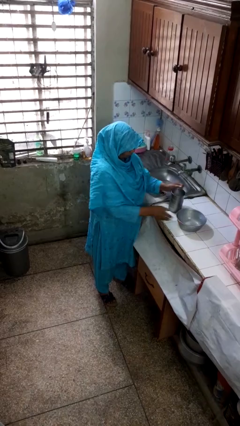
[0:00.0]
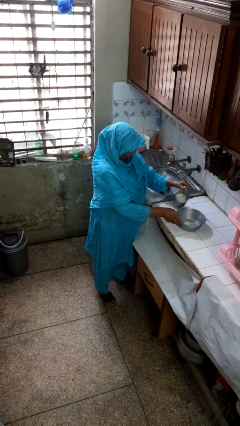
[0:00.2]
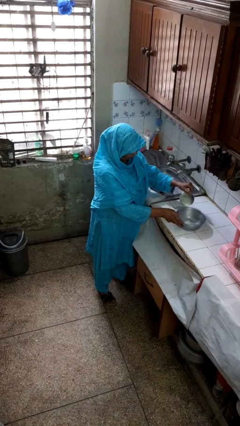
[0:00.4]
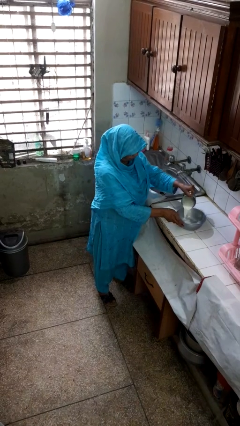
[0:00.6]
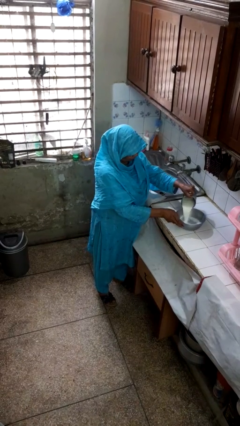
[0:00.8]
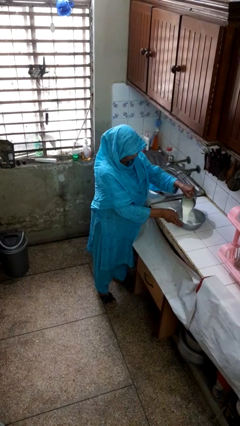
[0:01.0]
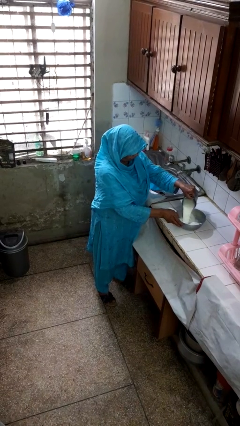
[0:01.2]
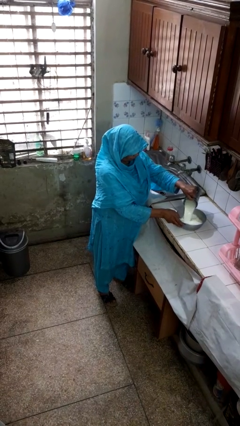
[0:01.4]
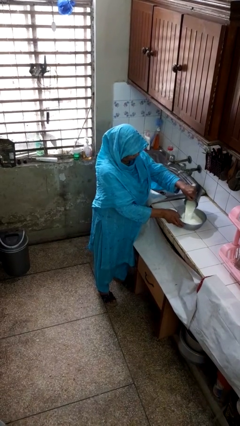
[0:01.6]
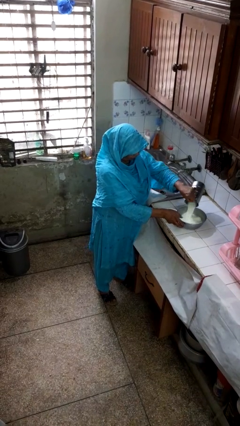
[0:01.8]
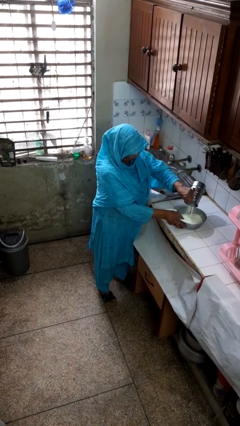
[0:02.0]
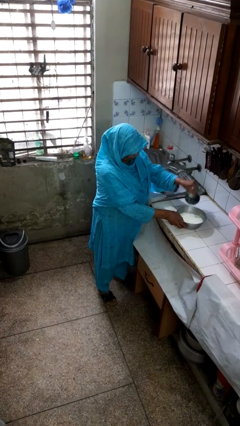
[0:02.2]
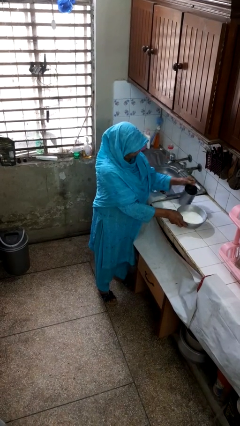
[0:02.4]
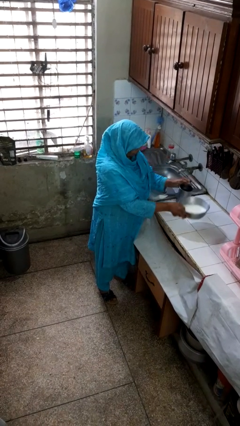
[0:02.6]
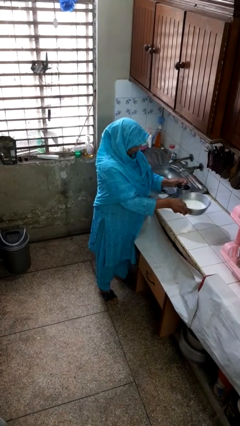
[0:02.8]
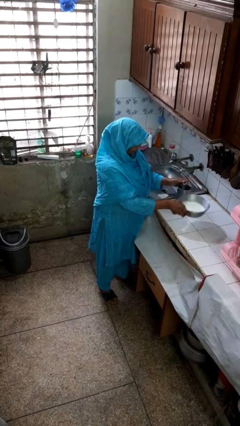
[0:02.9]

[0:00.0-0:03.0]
person pours into bowl

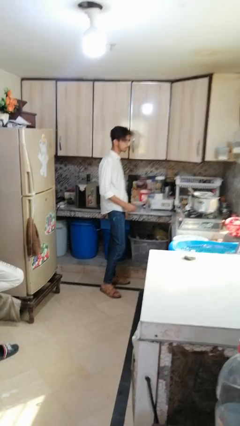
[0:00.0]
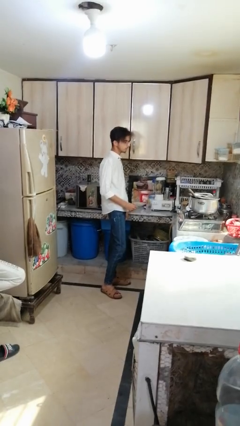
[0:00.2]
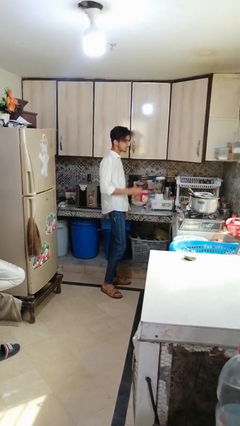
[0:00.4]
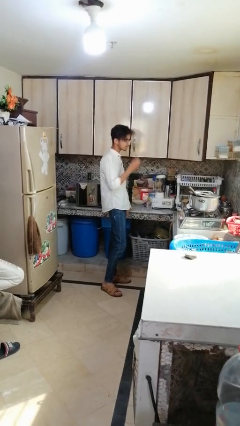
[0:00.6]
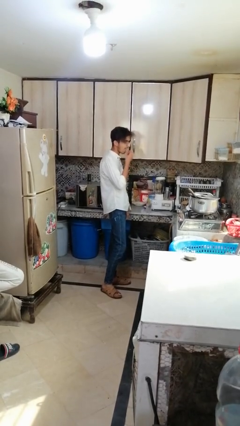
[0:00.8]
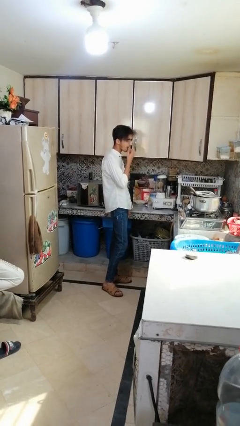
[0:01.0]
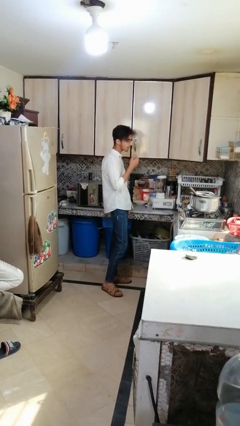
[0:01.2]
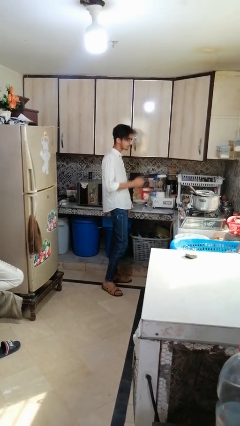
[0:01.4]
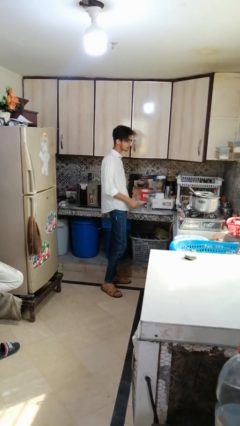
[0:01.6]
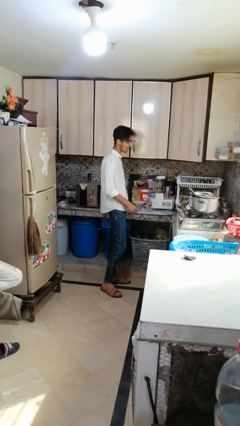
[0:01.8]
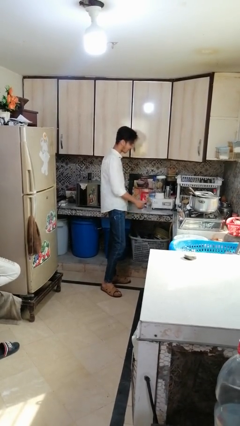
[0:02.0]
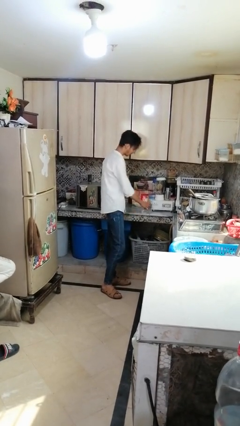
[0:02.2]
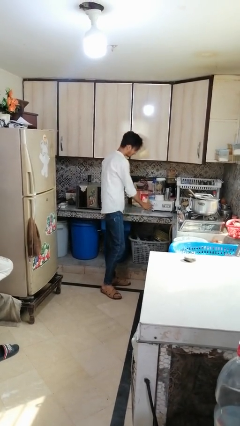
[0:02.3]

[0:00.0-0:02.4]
person takes medicine pills

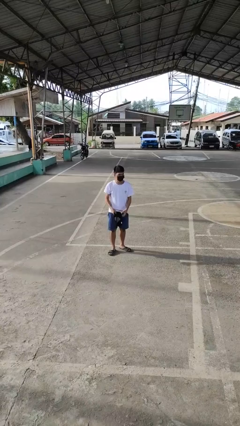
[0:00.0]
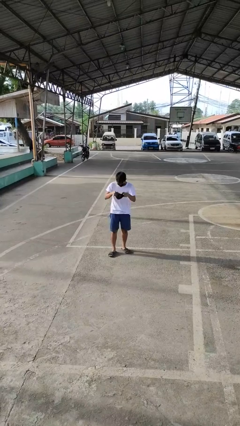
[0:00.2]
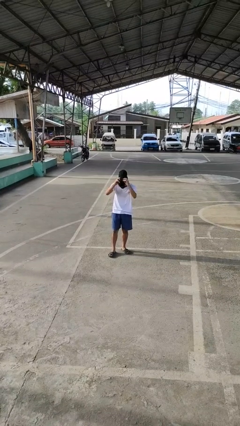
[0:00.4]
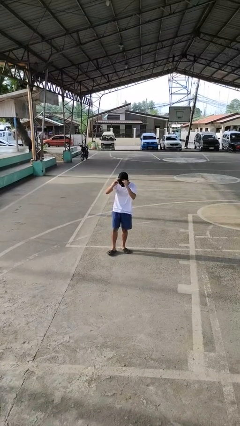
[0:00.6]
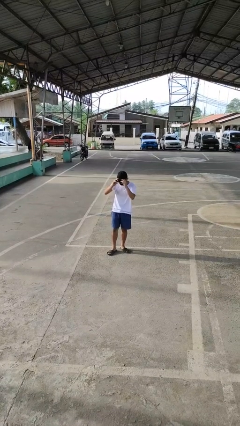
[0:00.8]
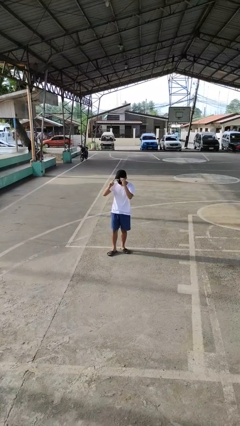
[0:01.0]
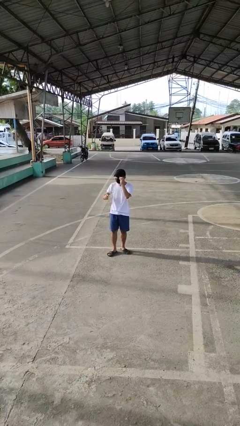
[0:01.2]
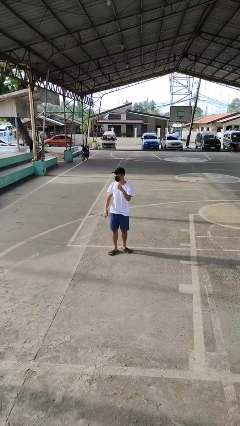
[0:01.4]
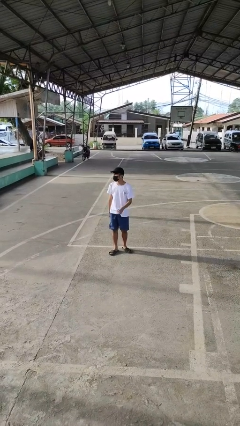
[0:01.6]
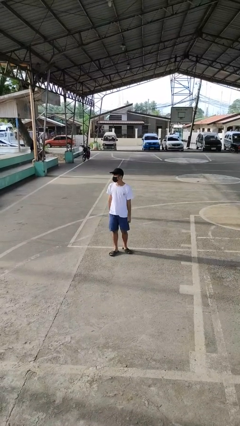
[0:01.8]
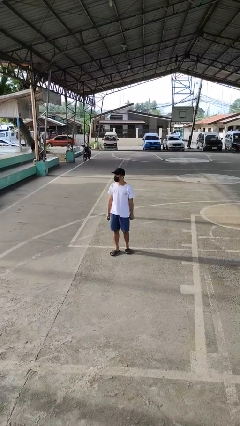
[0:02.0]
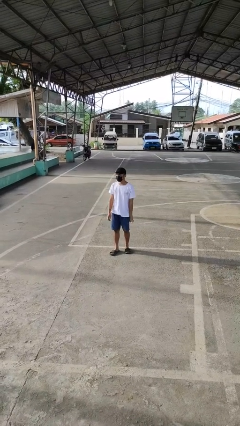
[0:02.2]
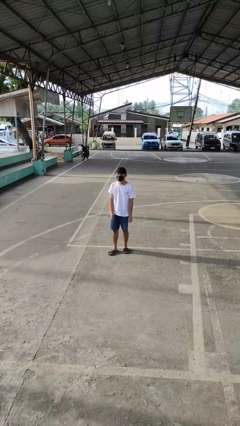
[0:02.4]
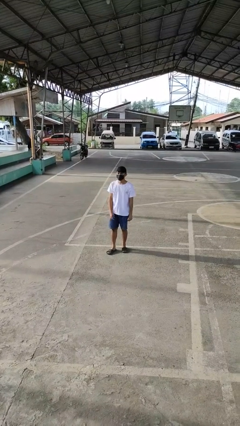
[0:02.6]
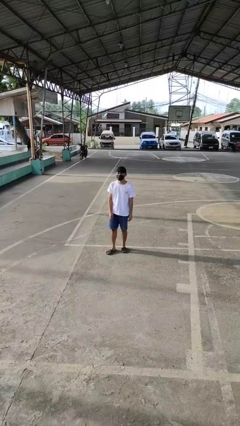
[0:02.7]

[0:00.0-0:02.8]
person puts on hat

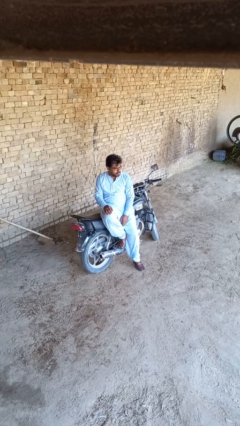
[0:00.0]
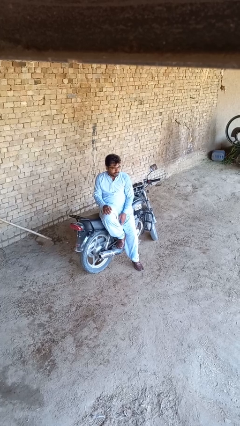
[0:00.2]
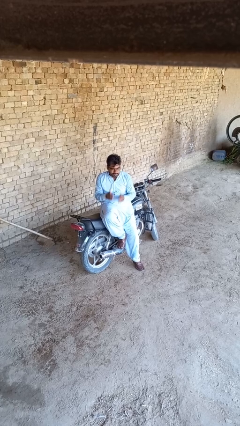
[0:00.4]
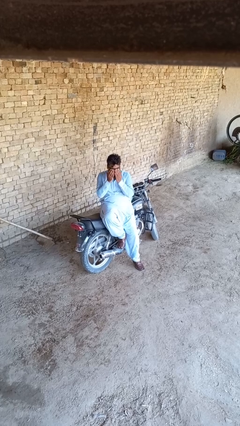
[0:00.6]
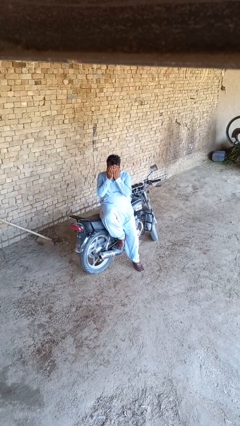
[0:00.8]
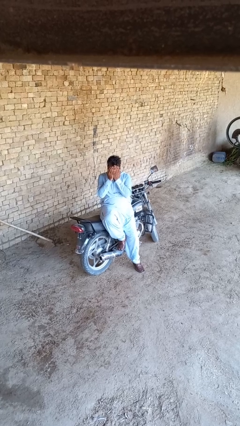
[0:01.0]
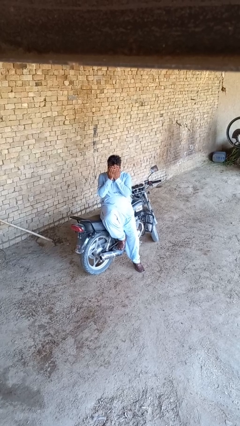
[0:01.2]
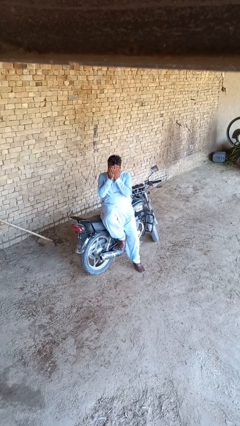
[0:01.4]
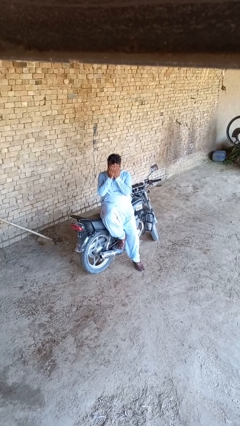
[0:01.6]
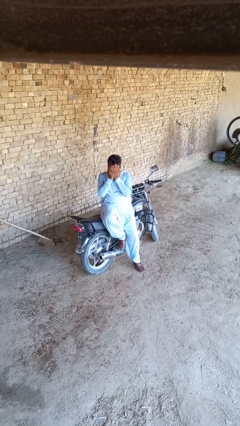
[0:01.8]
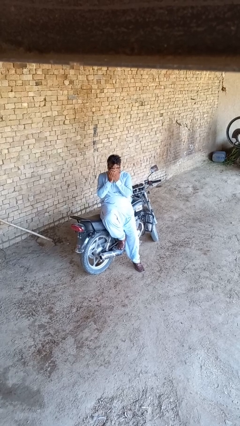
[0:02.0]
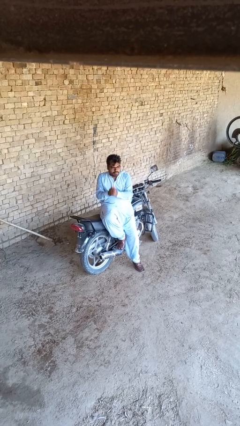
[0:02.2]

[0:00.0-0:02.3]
person covers face with hands

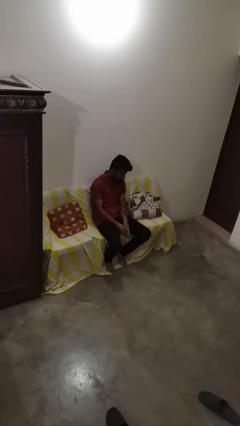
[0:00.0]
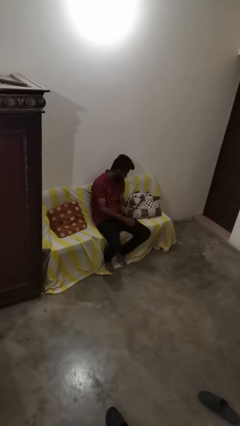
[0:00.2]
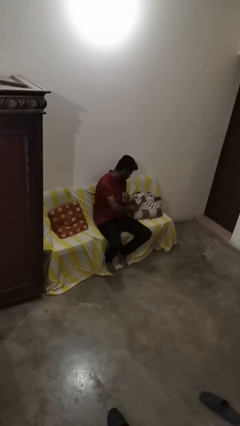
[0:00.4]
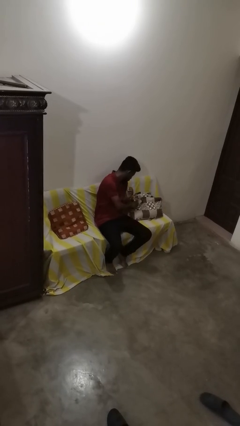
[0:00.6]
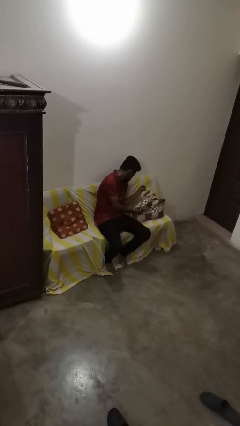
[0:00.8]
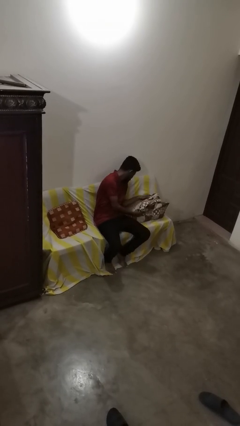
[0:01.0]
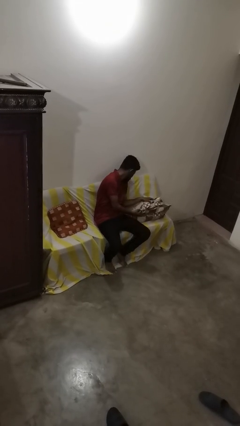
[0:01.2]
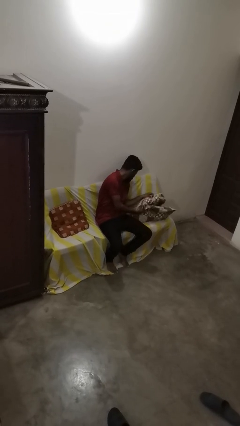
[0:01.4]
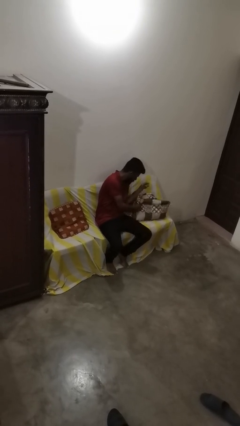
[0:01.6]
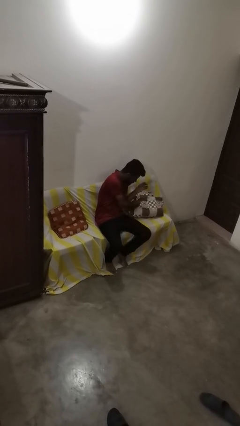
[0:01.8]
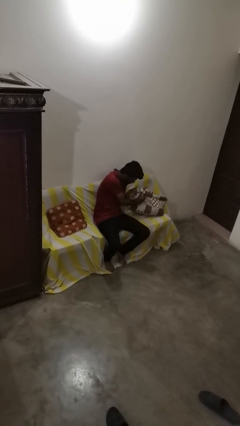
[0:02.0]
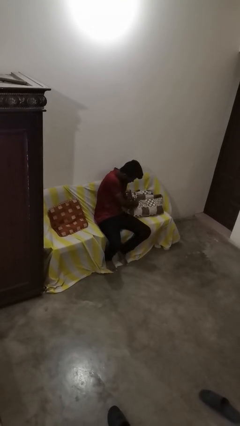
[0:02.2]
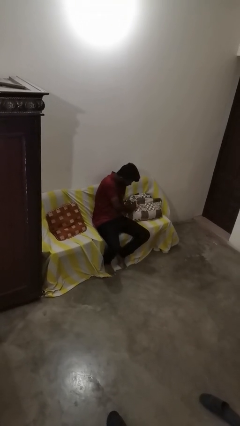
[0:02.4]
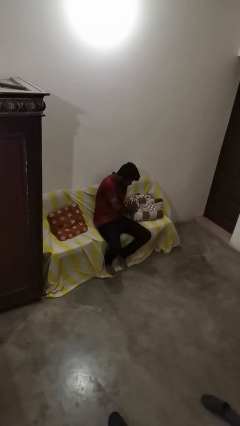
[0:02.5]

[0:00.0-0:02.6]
person searches in couch

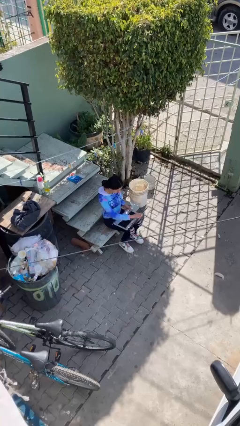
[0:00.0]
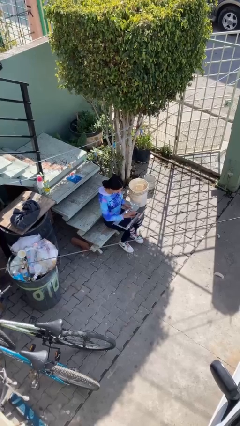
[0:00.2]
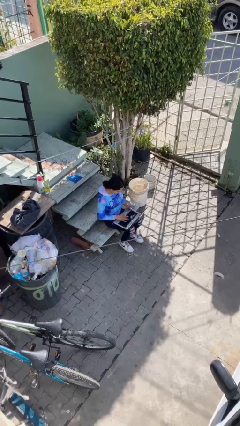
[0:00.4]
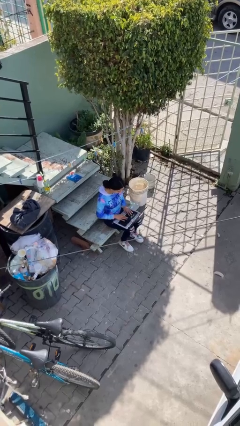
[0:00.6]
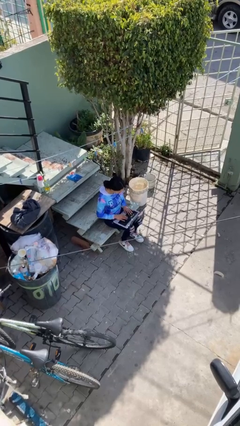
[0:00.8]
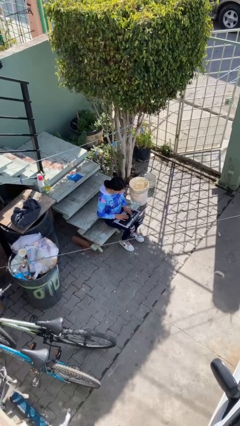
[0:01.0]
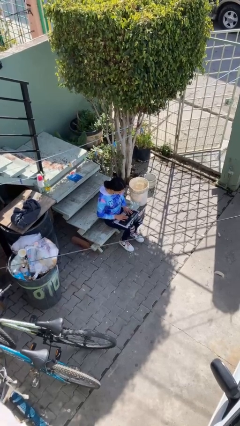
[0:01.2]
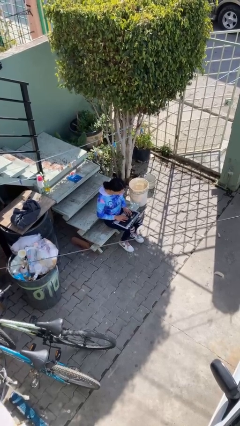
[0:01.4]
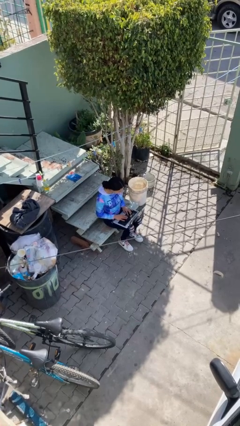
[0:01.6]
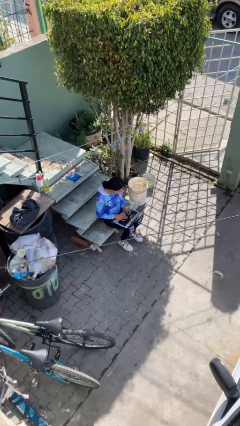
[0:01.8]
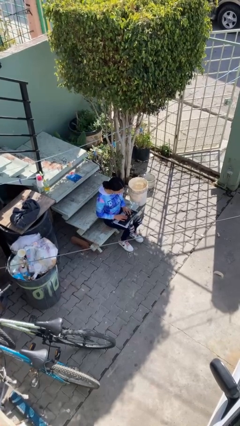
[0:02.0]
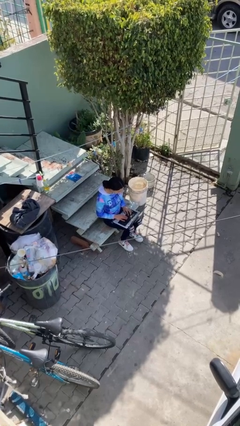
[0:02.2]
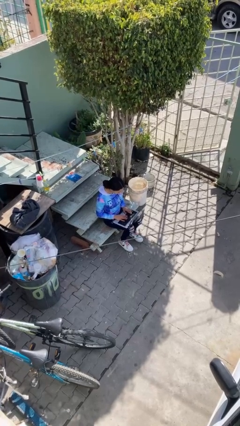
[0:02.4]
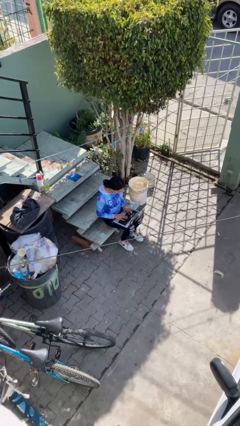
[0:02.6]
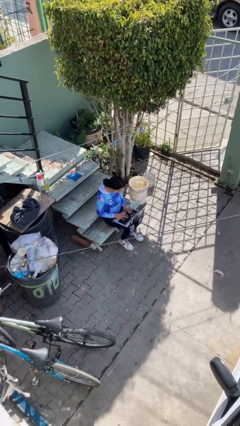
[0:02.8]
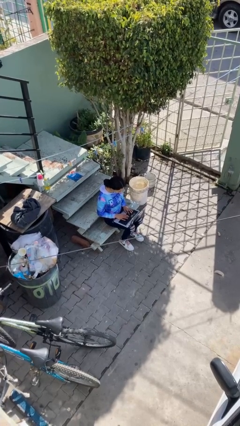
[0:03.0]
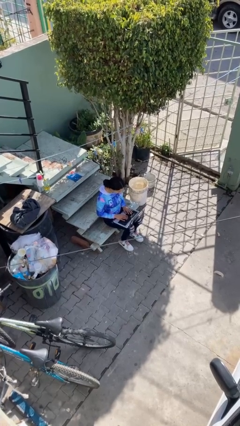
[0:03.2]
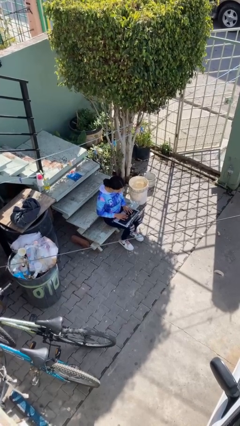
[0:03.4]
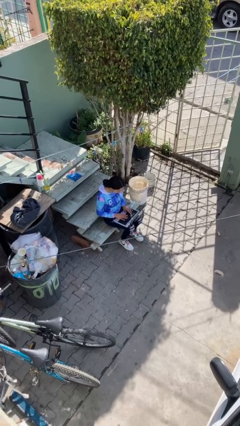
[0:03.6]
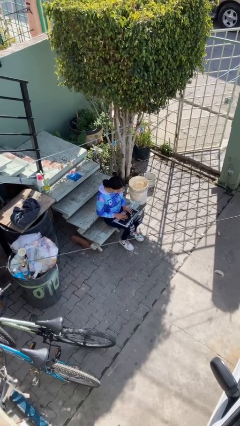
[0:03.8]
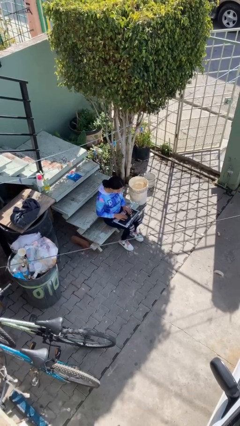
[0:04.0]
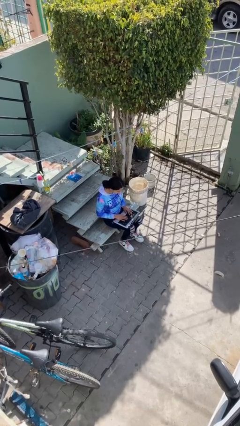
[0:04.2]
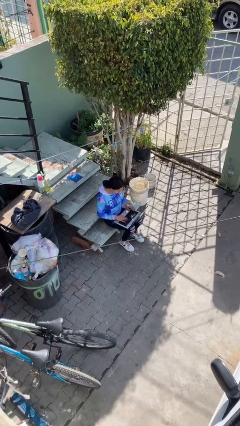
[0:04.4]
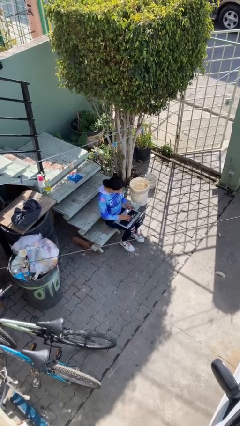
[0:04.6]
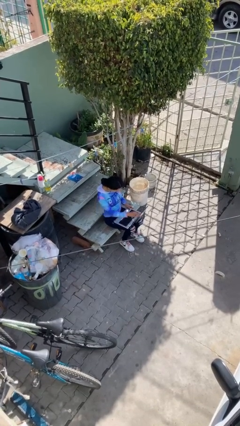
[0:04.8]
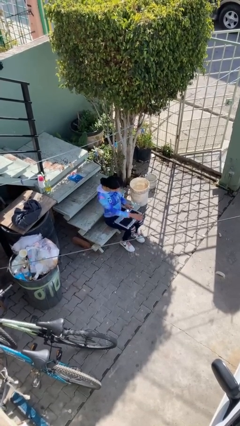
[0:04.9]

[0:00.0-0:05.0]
person interacts with laptop
